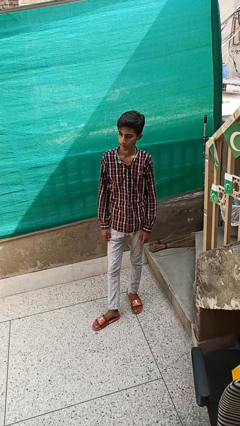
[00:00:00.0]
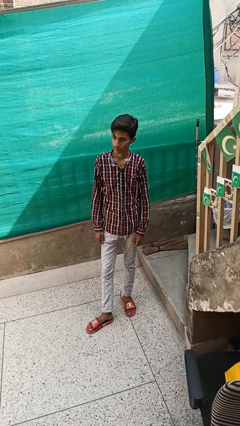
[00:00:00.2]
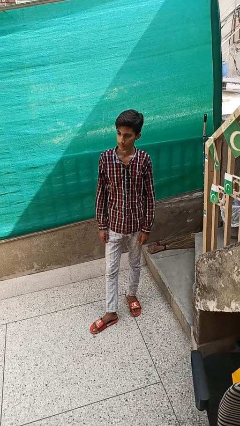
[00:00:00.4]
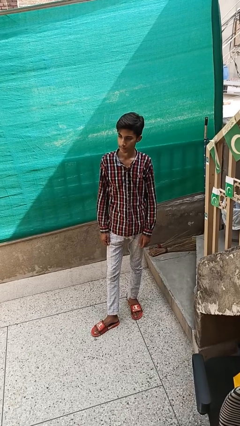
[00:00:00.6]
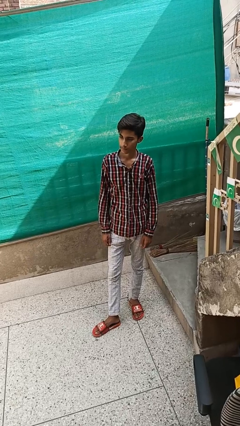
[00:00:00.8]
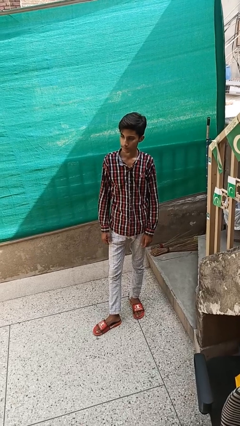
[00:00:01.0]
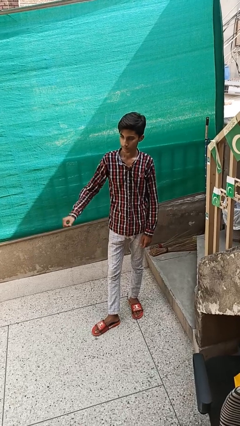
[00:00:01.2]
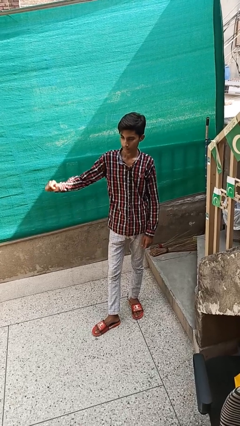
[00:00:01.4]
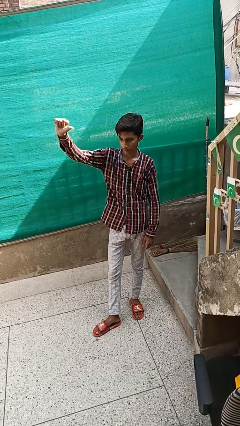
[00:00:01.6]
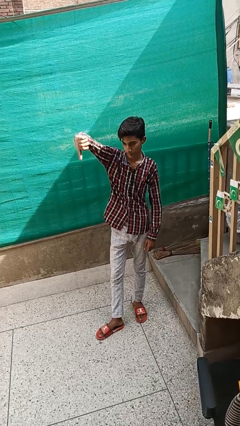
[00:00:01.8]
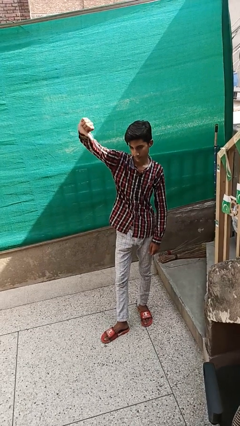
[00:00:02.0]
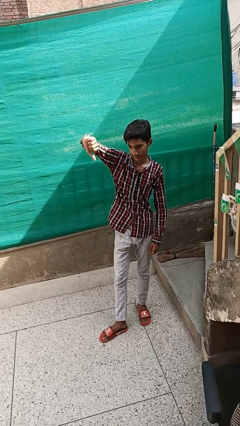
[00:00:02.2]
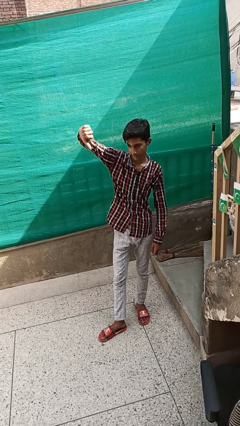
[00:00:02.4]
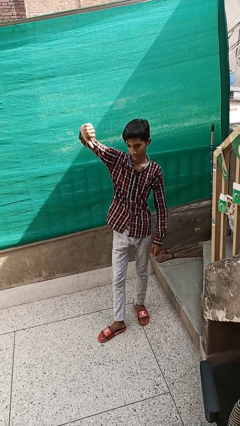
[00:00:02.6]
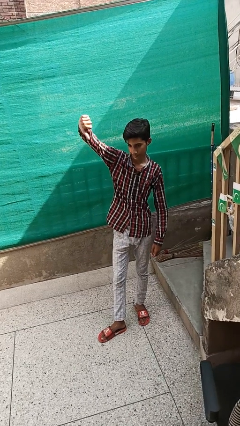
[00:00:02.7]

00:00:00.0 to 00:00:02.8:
person gestures thumbs down

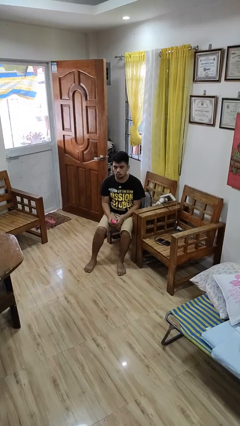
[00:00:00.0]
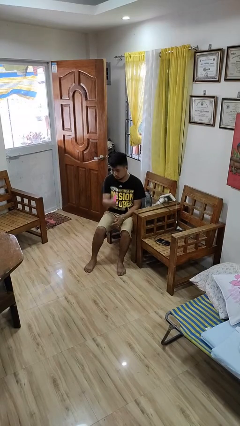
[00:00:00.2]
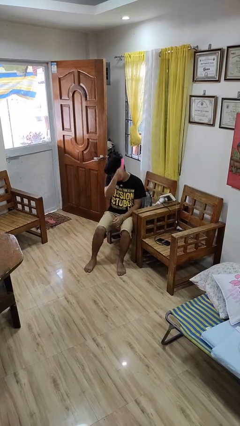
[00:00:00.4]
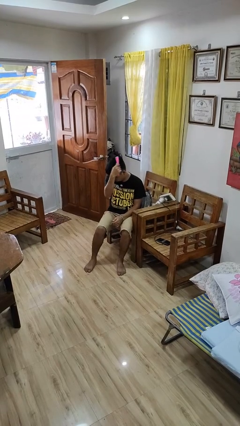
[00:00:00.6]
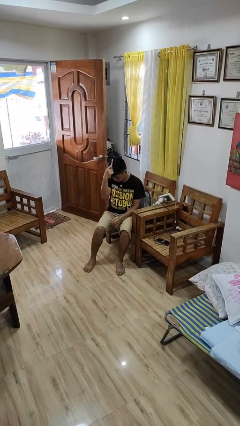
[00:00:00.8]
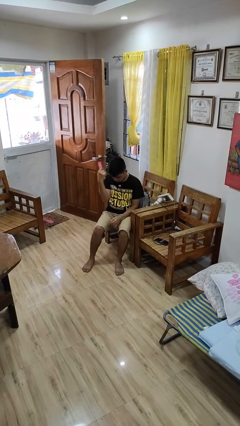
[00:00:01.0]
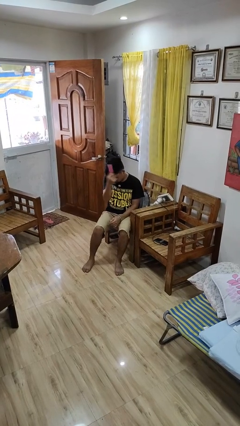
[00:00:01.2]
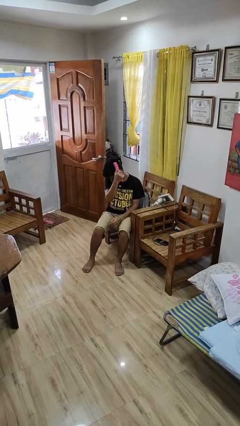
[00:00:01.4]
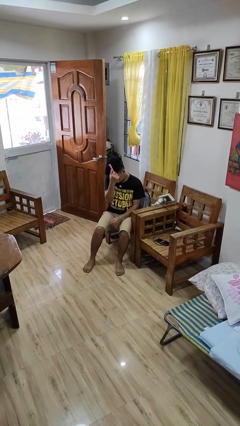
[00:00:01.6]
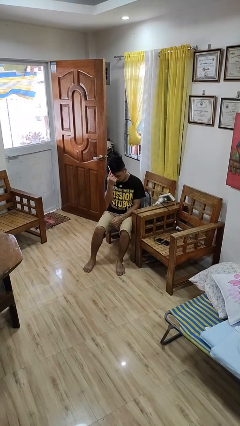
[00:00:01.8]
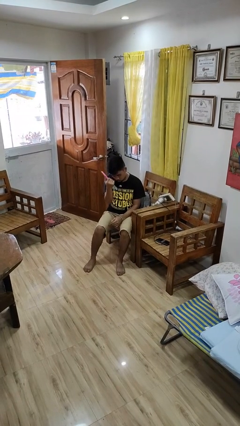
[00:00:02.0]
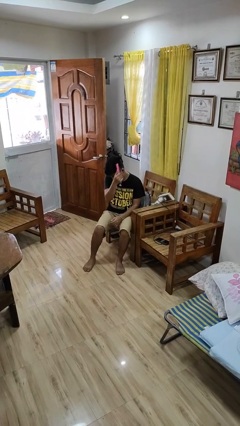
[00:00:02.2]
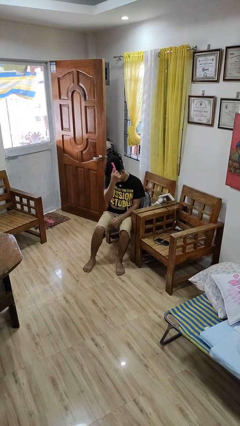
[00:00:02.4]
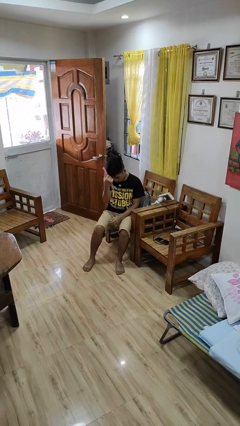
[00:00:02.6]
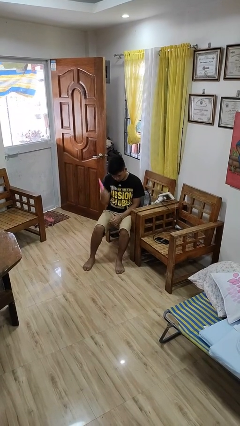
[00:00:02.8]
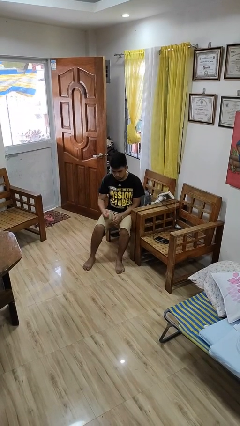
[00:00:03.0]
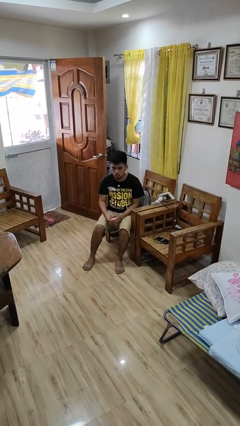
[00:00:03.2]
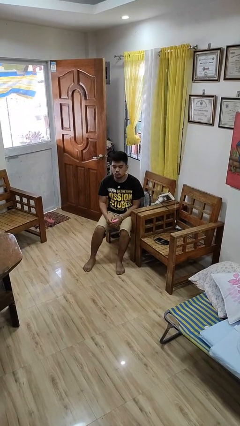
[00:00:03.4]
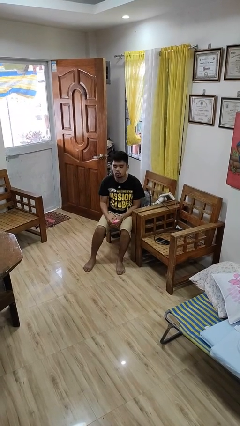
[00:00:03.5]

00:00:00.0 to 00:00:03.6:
person brushes hair

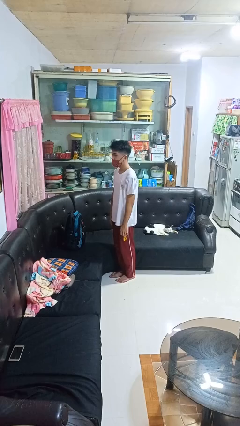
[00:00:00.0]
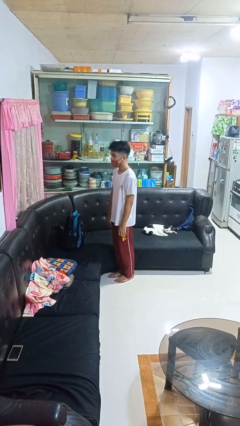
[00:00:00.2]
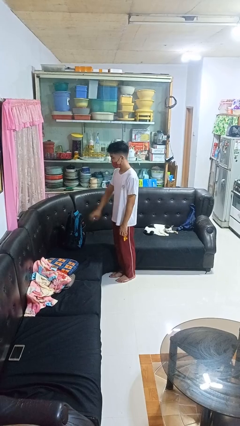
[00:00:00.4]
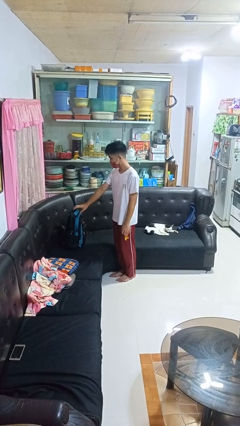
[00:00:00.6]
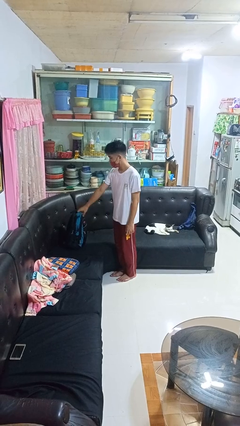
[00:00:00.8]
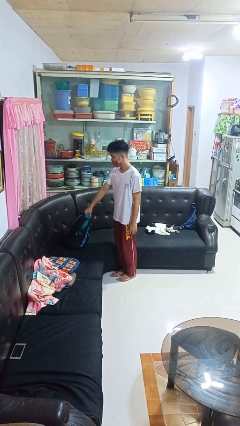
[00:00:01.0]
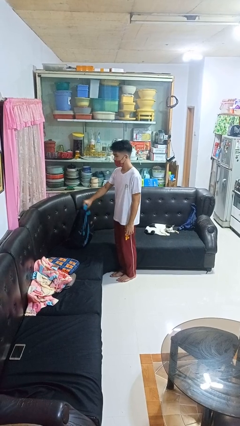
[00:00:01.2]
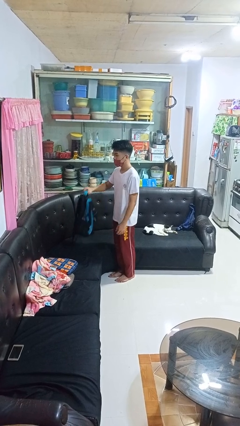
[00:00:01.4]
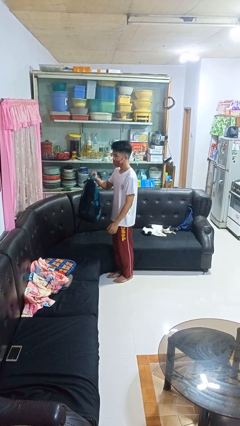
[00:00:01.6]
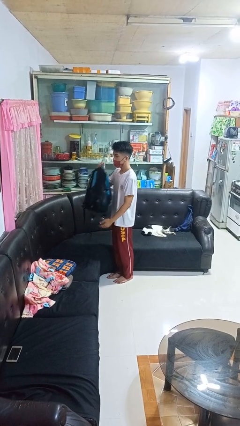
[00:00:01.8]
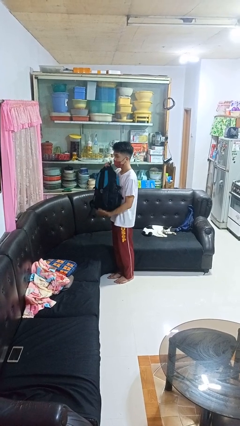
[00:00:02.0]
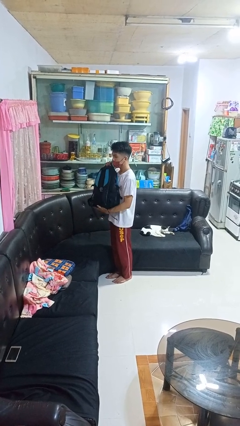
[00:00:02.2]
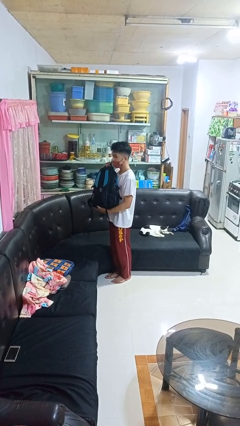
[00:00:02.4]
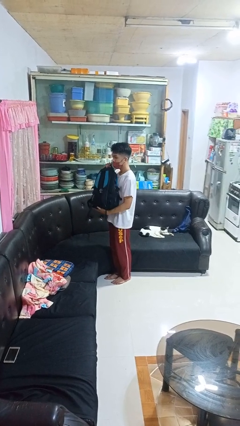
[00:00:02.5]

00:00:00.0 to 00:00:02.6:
person picks up object from couch

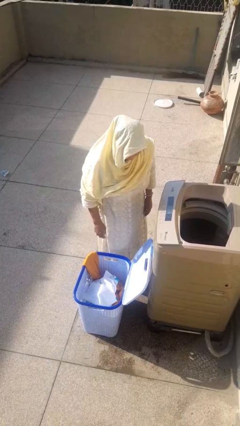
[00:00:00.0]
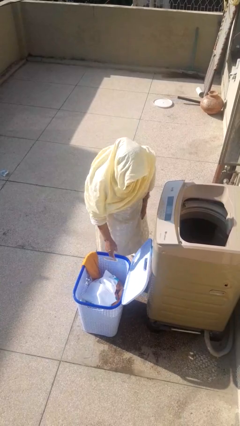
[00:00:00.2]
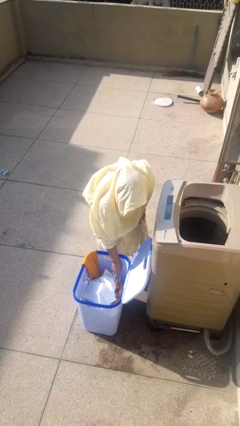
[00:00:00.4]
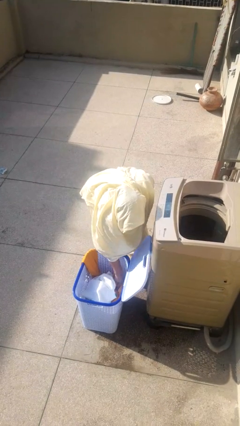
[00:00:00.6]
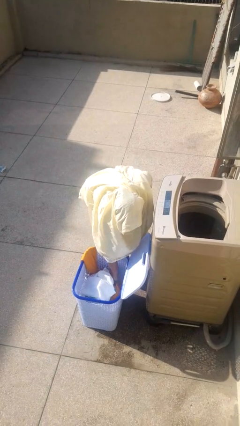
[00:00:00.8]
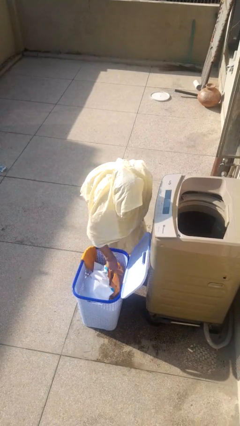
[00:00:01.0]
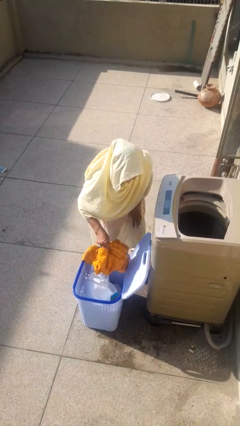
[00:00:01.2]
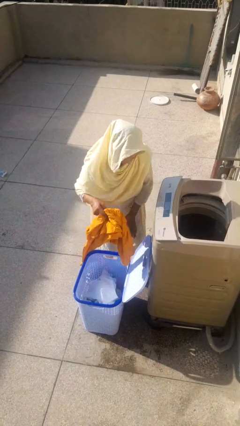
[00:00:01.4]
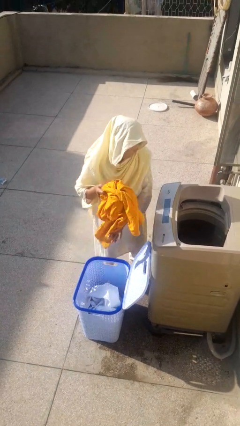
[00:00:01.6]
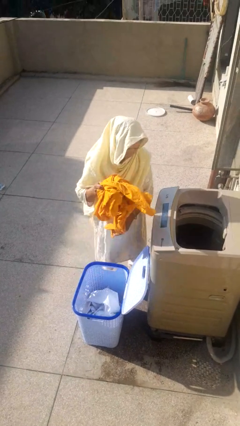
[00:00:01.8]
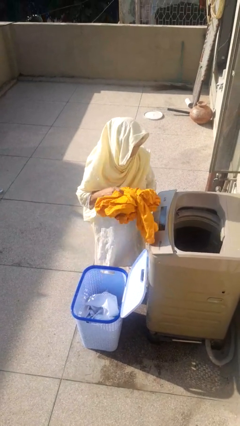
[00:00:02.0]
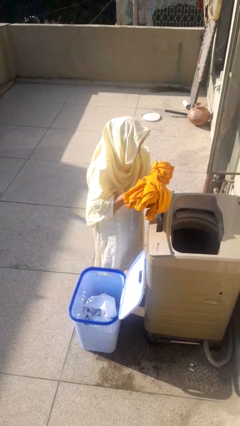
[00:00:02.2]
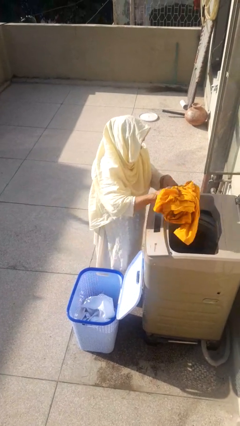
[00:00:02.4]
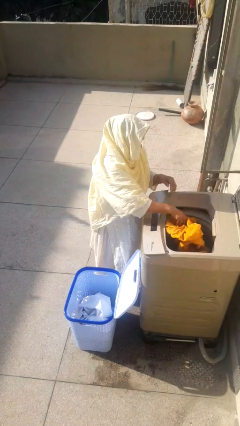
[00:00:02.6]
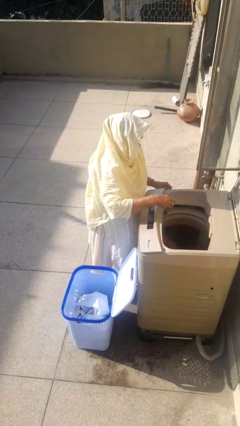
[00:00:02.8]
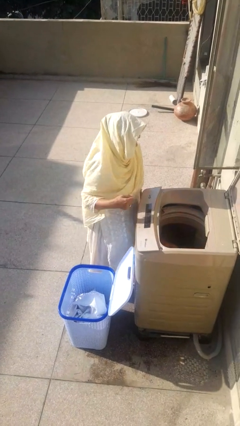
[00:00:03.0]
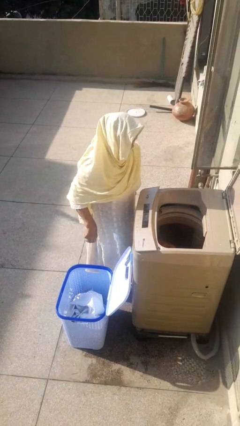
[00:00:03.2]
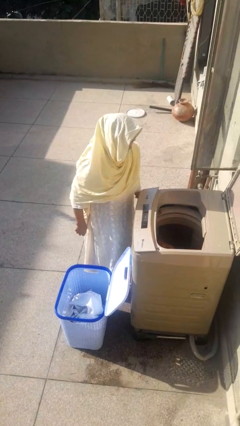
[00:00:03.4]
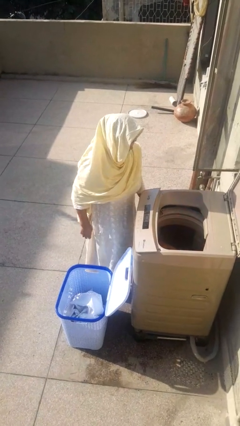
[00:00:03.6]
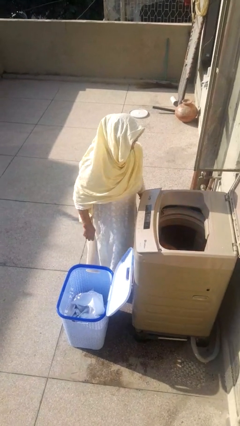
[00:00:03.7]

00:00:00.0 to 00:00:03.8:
person loads clotheswasher

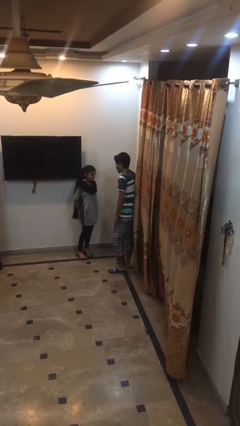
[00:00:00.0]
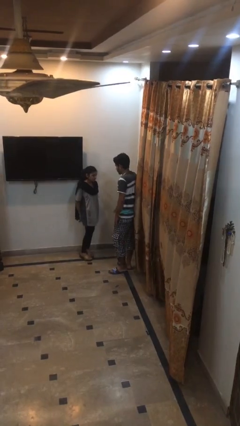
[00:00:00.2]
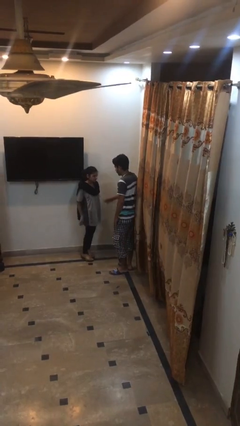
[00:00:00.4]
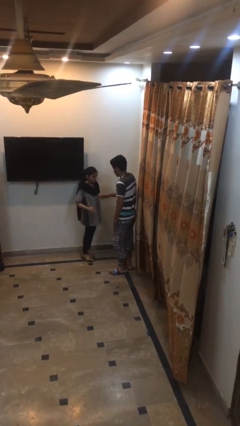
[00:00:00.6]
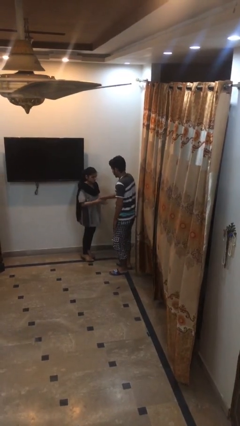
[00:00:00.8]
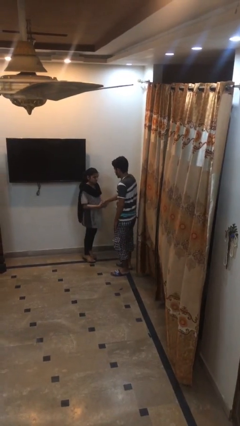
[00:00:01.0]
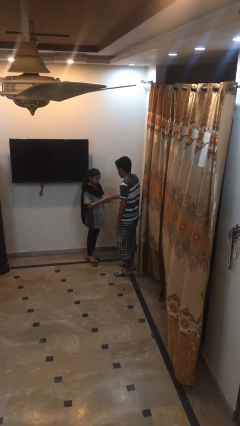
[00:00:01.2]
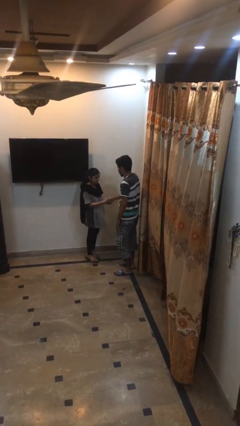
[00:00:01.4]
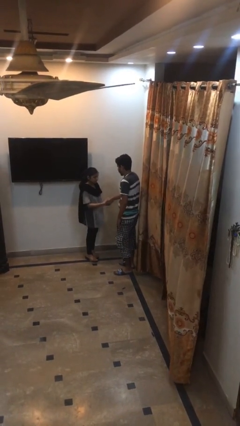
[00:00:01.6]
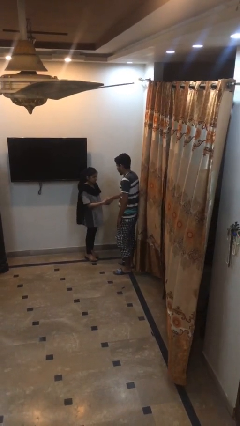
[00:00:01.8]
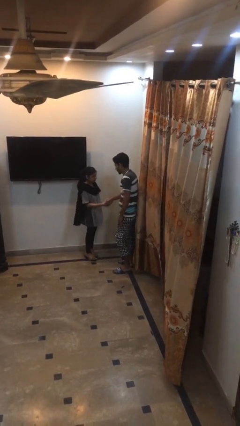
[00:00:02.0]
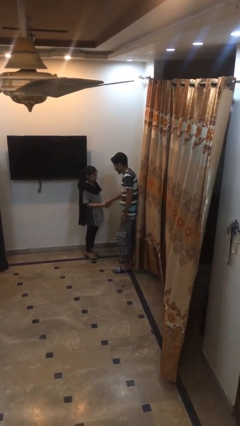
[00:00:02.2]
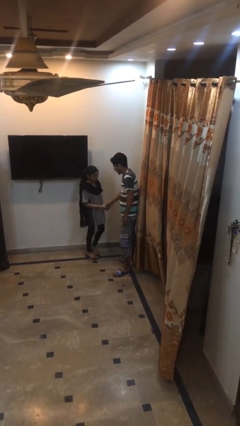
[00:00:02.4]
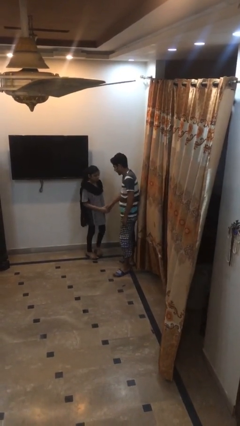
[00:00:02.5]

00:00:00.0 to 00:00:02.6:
person shakes hand

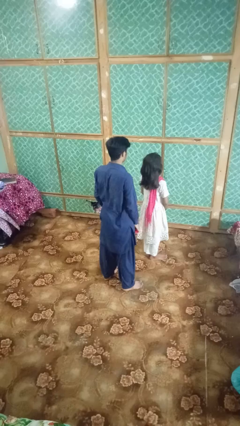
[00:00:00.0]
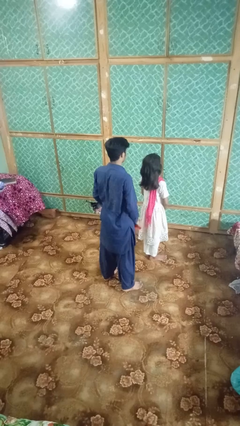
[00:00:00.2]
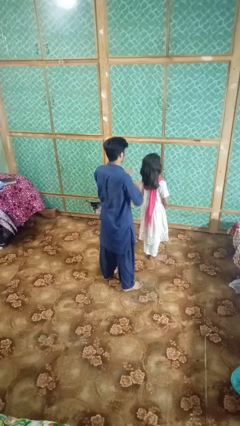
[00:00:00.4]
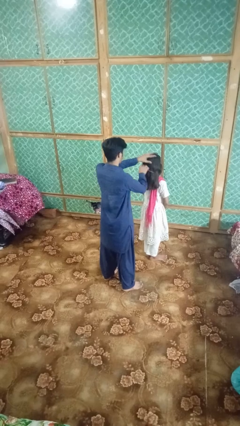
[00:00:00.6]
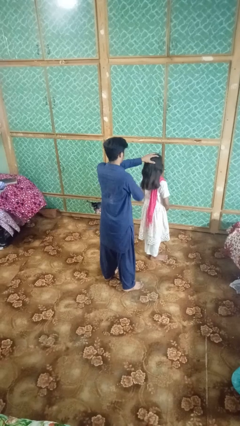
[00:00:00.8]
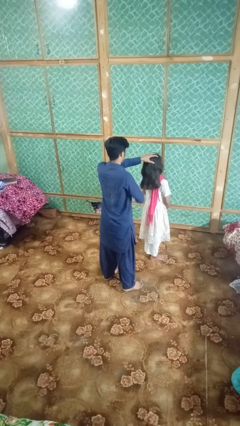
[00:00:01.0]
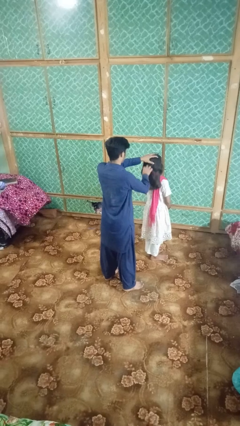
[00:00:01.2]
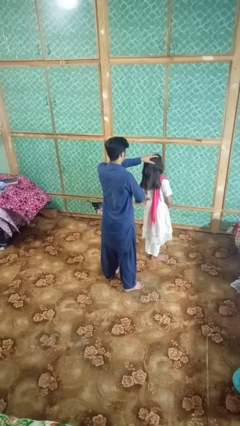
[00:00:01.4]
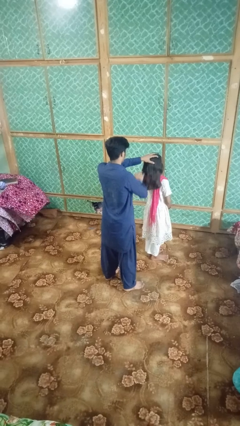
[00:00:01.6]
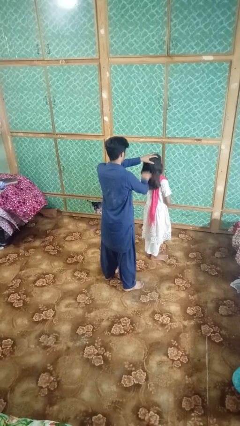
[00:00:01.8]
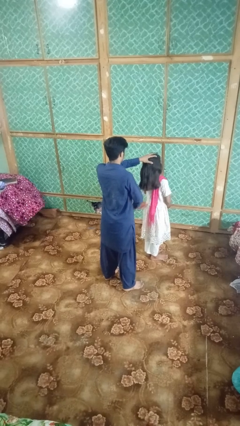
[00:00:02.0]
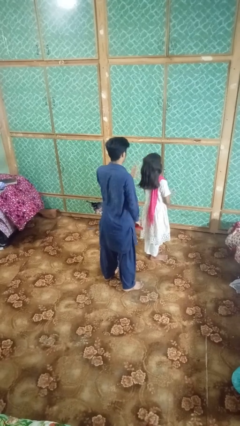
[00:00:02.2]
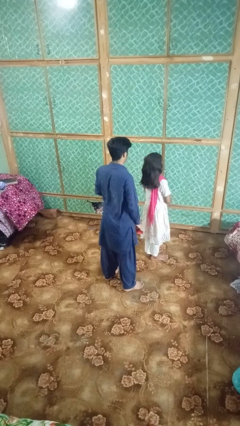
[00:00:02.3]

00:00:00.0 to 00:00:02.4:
person brushes hair of person
